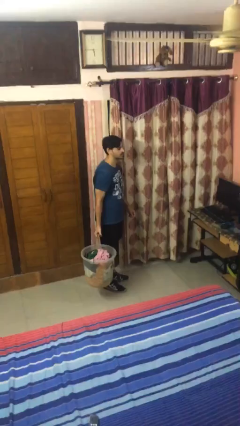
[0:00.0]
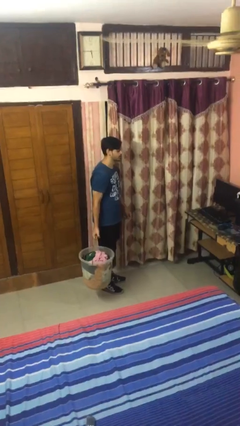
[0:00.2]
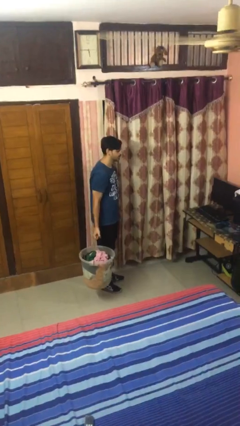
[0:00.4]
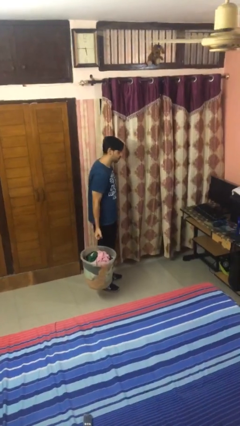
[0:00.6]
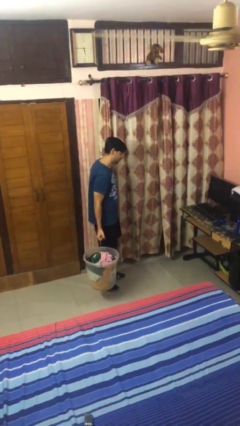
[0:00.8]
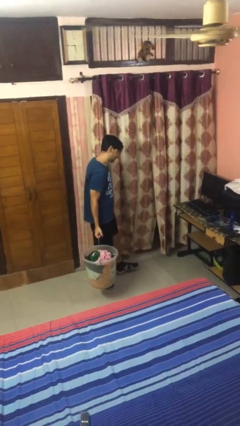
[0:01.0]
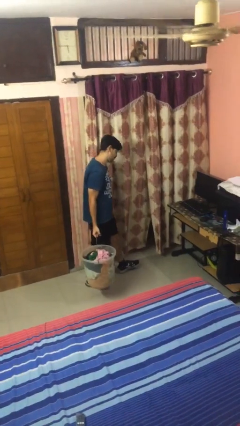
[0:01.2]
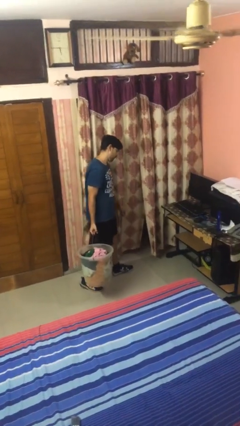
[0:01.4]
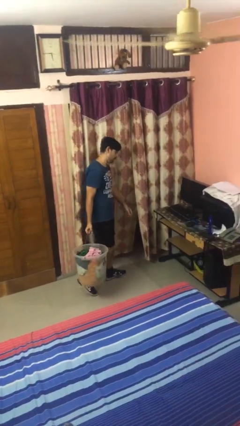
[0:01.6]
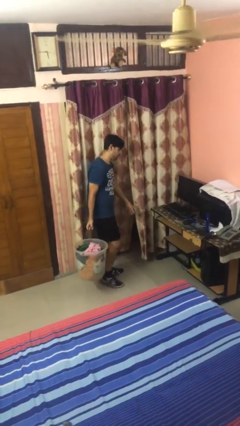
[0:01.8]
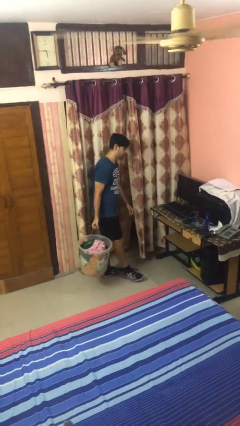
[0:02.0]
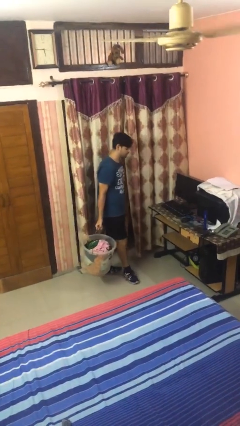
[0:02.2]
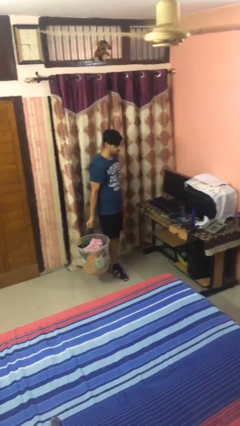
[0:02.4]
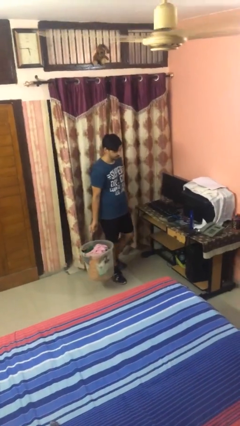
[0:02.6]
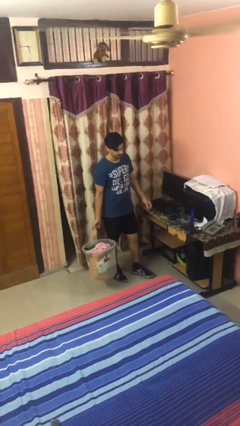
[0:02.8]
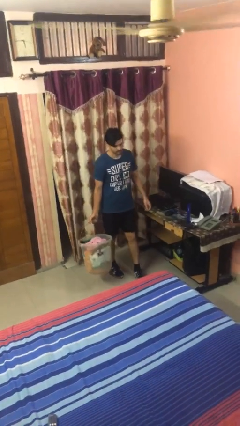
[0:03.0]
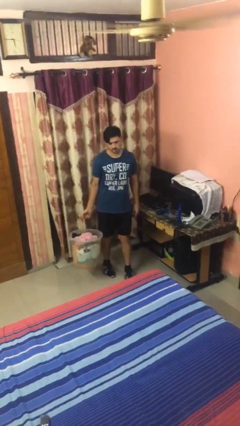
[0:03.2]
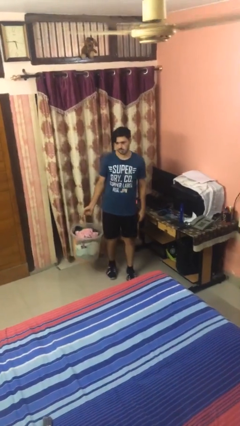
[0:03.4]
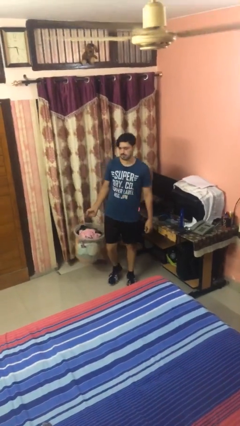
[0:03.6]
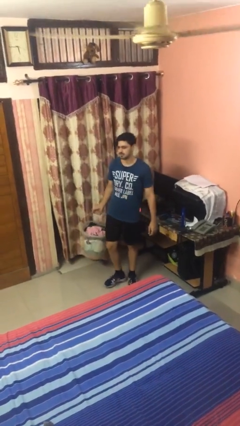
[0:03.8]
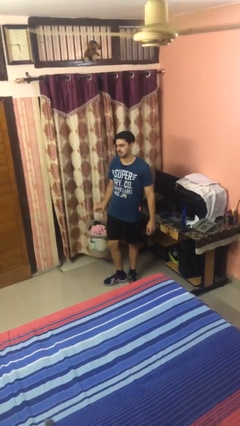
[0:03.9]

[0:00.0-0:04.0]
person carries laundry basket

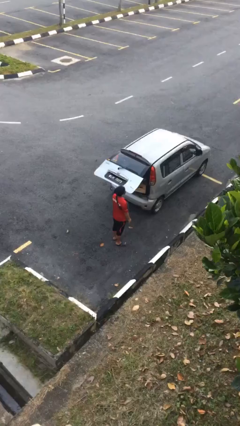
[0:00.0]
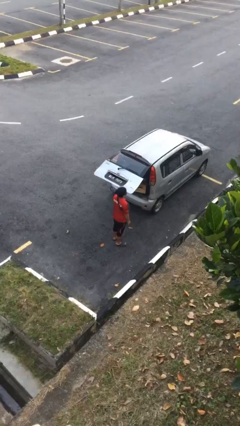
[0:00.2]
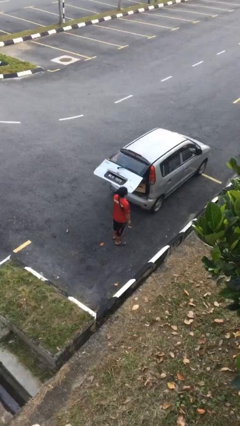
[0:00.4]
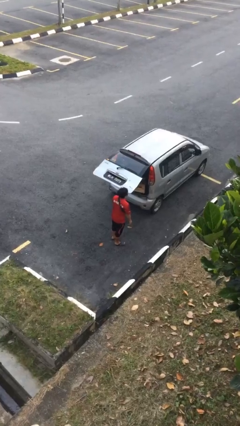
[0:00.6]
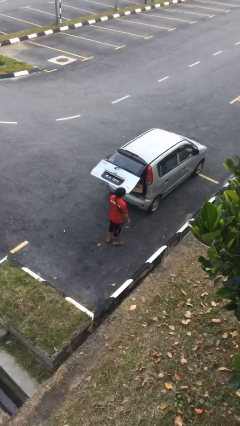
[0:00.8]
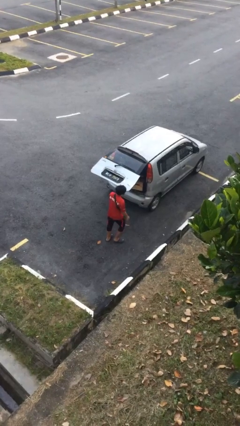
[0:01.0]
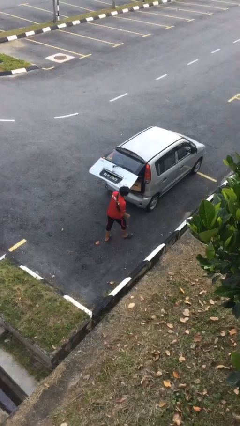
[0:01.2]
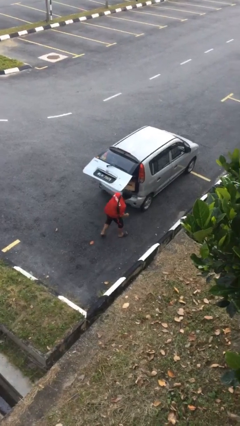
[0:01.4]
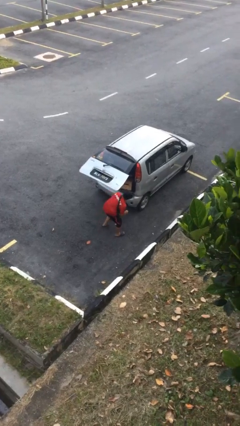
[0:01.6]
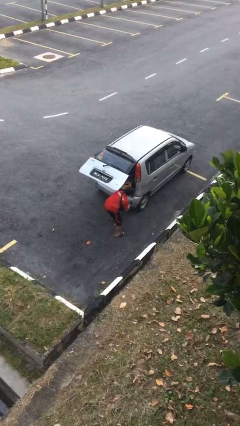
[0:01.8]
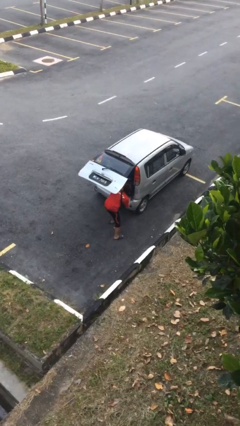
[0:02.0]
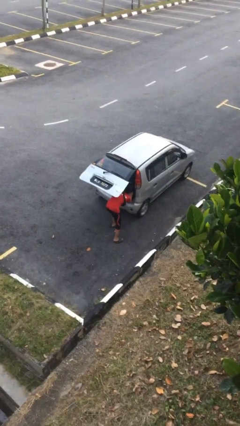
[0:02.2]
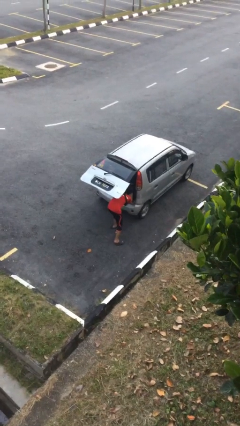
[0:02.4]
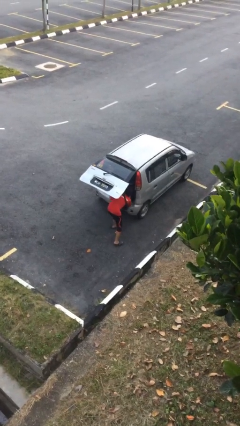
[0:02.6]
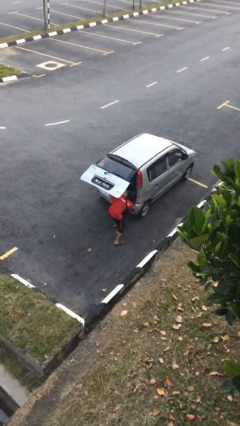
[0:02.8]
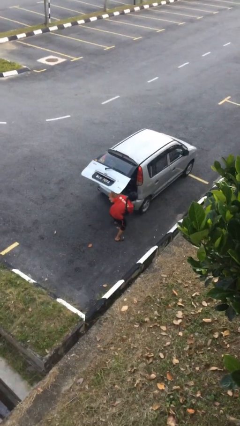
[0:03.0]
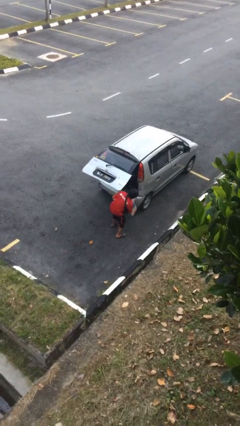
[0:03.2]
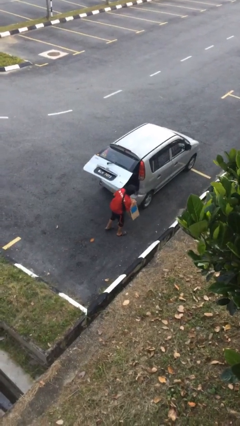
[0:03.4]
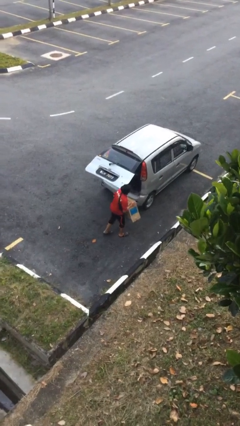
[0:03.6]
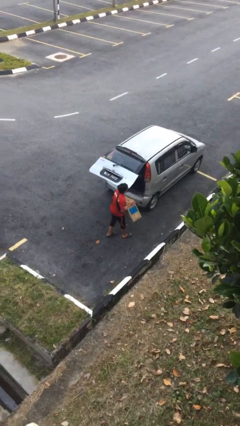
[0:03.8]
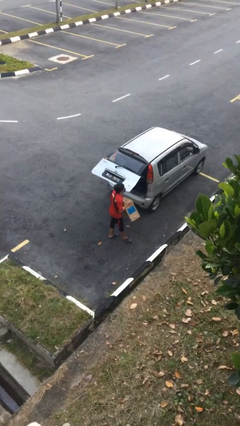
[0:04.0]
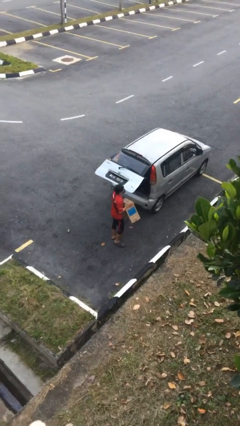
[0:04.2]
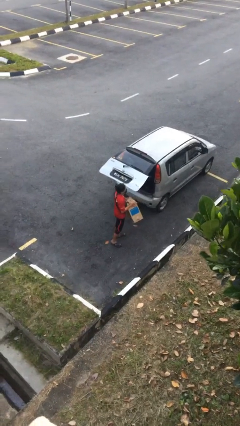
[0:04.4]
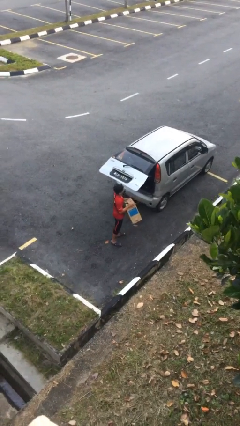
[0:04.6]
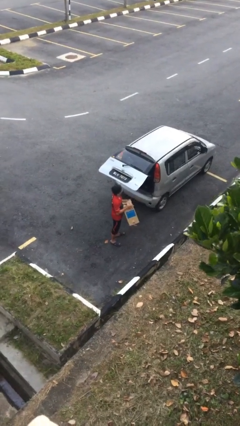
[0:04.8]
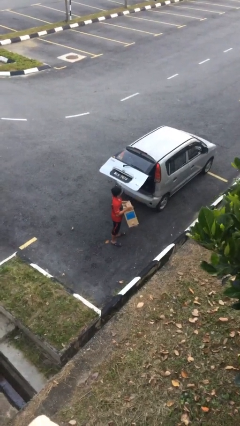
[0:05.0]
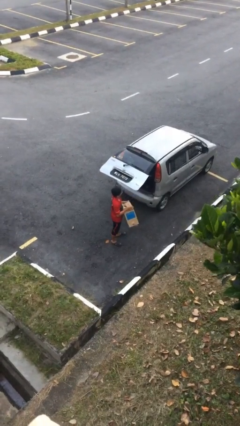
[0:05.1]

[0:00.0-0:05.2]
person unloads car

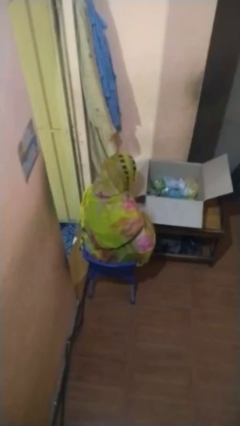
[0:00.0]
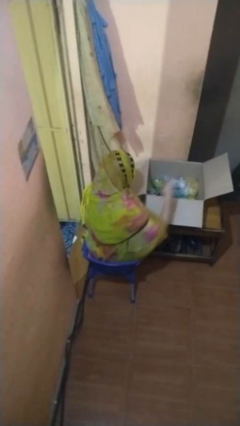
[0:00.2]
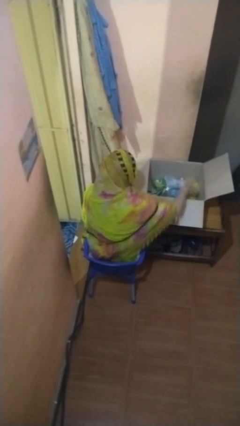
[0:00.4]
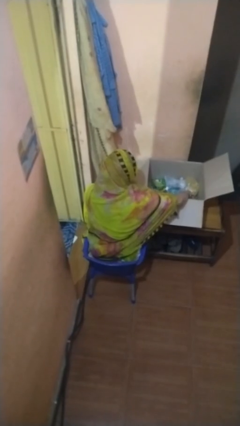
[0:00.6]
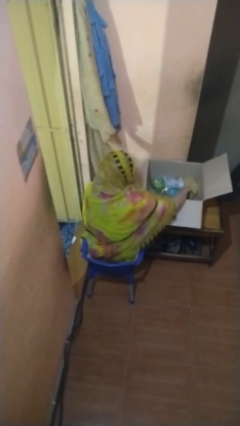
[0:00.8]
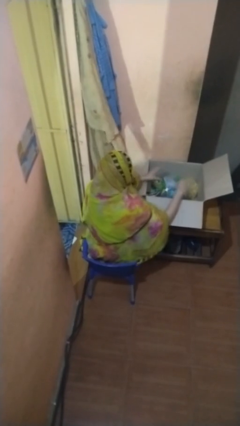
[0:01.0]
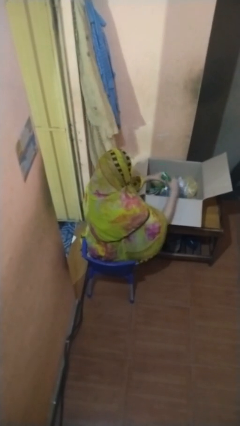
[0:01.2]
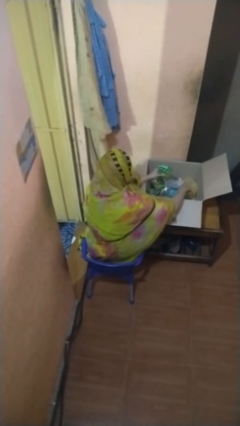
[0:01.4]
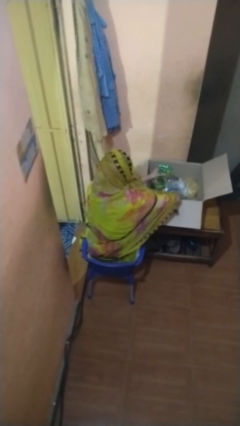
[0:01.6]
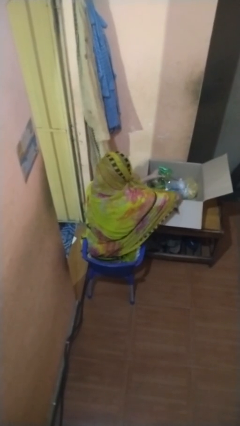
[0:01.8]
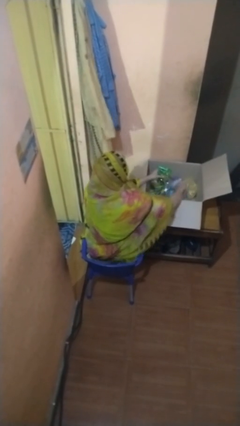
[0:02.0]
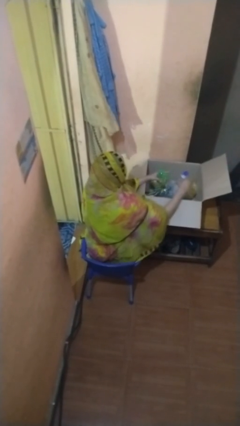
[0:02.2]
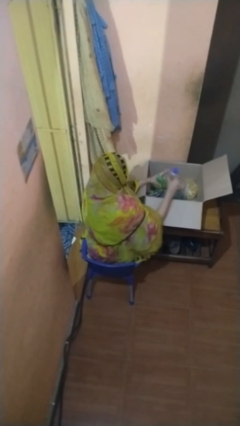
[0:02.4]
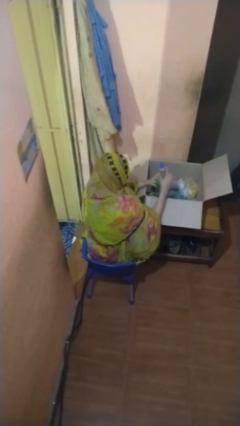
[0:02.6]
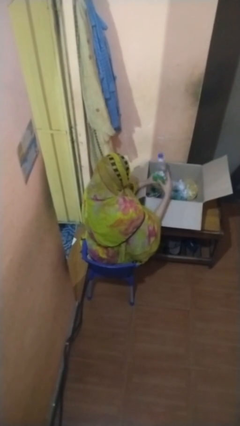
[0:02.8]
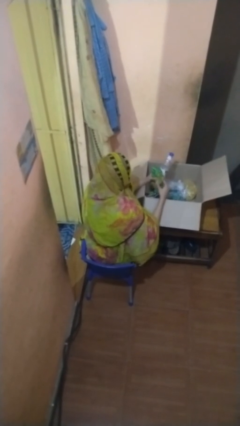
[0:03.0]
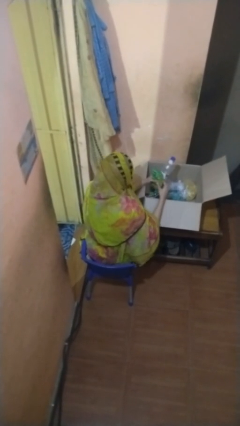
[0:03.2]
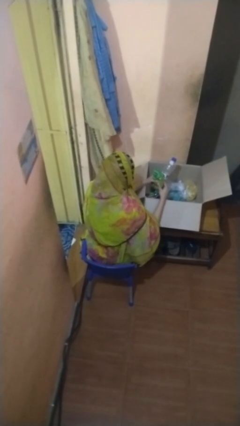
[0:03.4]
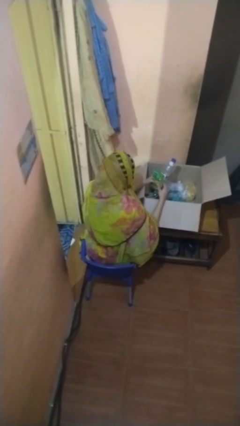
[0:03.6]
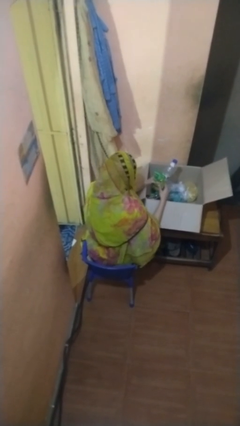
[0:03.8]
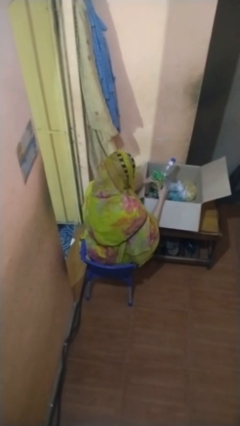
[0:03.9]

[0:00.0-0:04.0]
person takes object from box

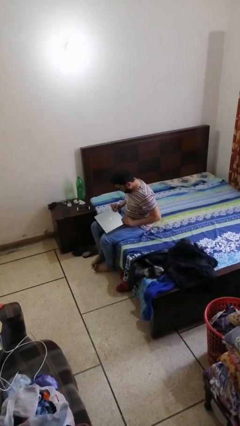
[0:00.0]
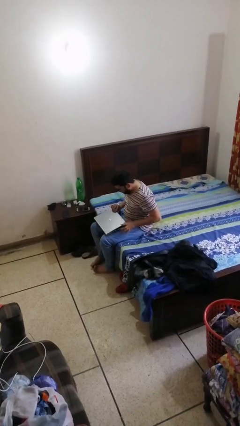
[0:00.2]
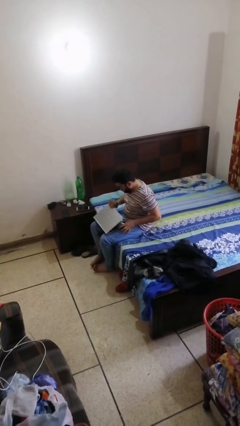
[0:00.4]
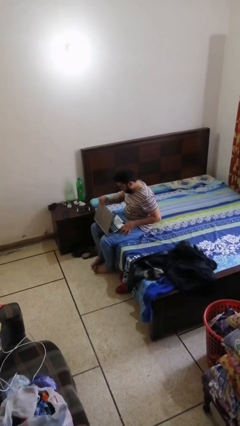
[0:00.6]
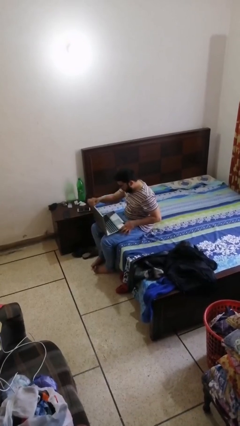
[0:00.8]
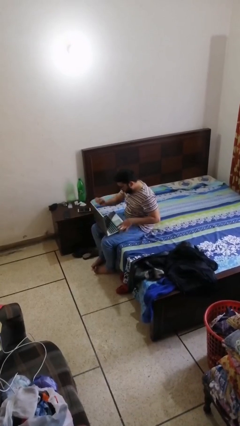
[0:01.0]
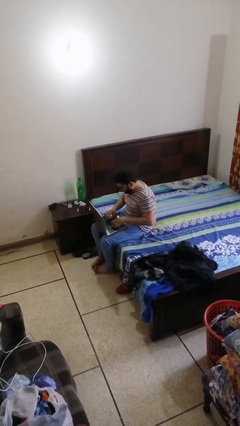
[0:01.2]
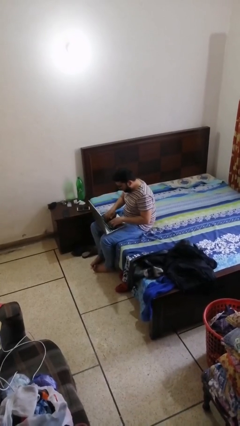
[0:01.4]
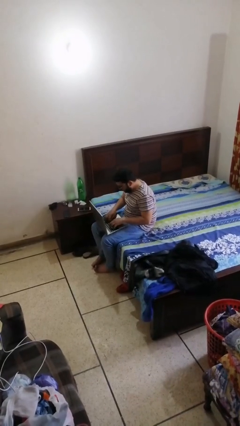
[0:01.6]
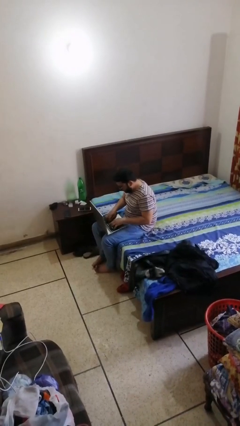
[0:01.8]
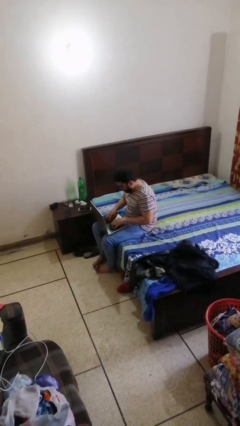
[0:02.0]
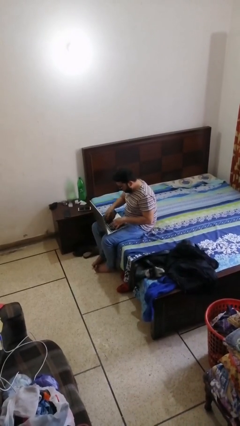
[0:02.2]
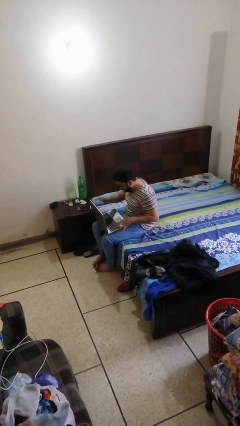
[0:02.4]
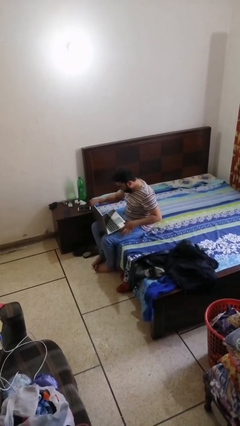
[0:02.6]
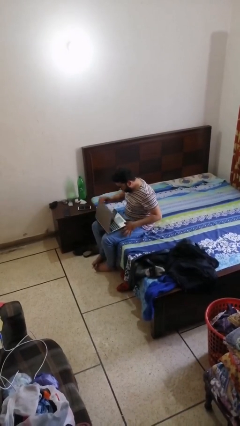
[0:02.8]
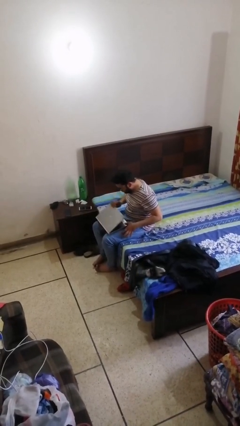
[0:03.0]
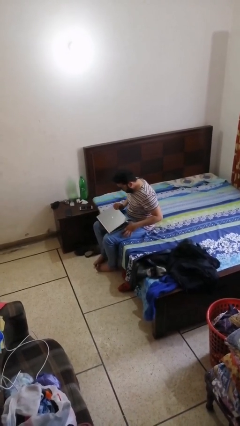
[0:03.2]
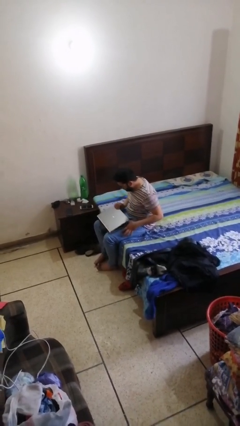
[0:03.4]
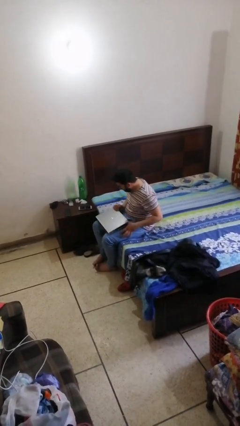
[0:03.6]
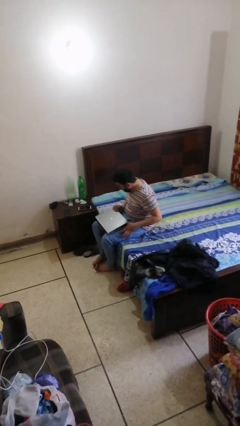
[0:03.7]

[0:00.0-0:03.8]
person interacts with laptop

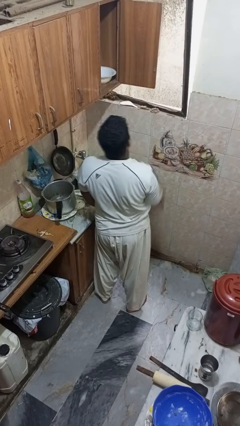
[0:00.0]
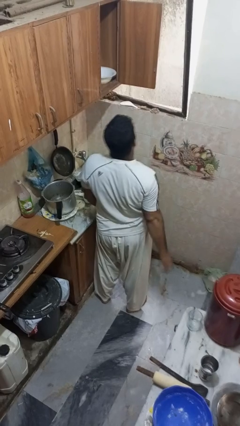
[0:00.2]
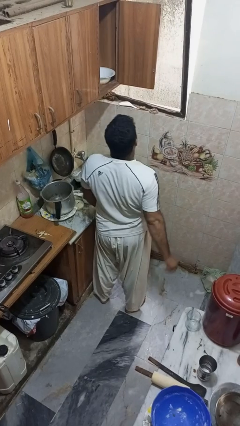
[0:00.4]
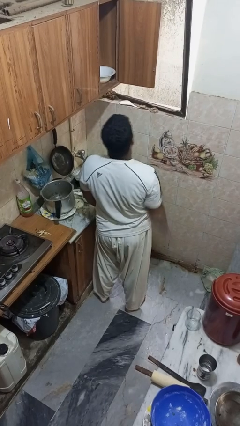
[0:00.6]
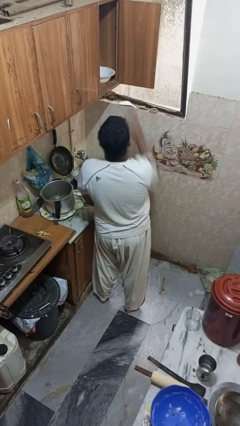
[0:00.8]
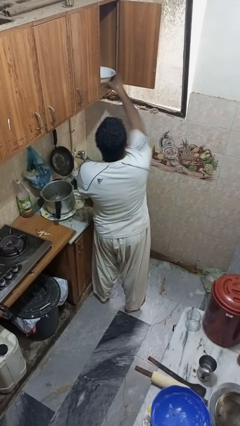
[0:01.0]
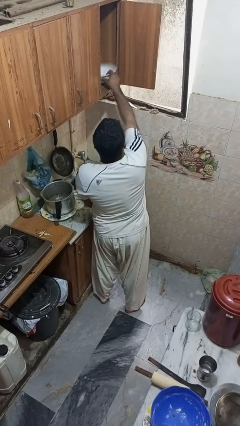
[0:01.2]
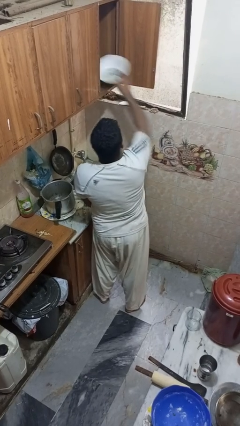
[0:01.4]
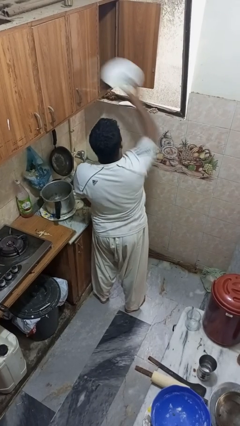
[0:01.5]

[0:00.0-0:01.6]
person takes object from cabinet
